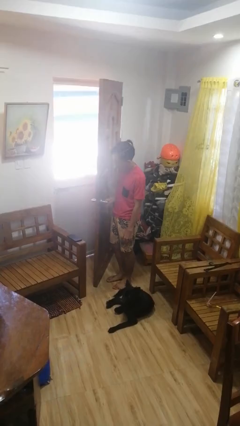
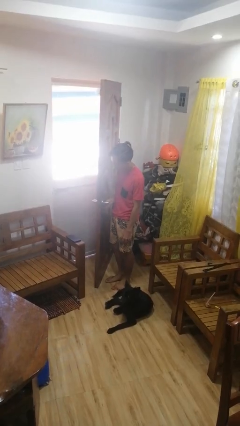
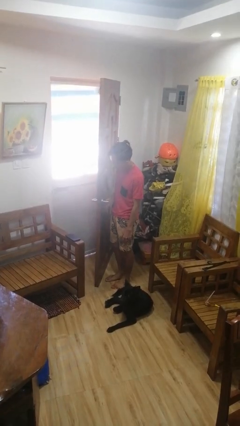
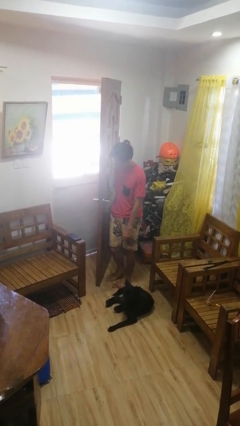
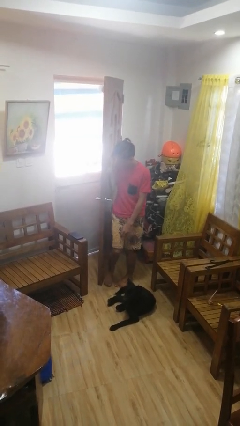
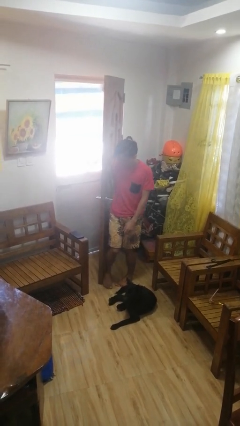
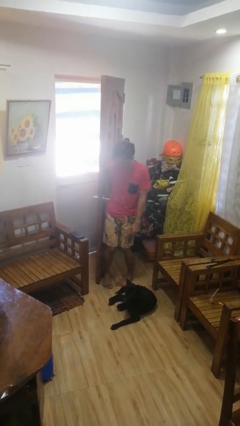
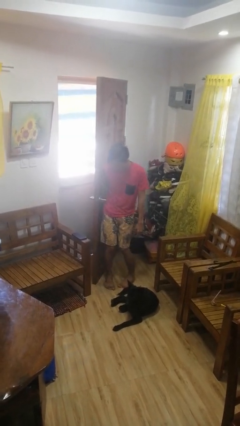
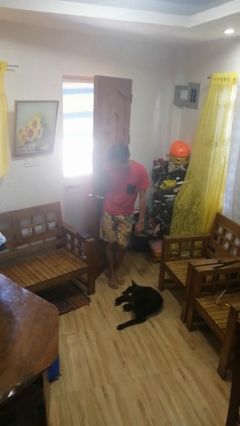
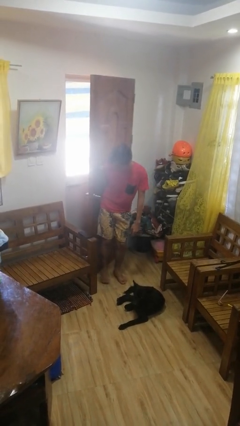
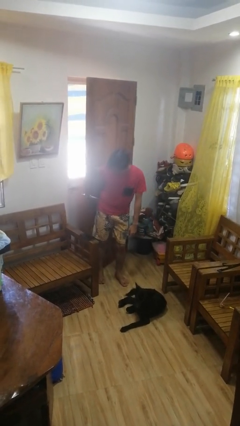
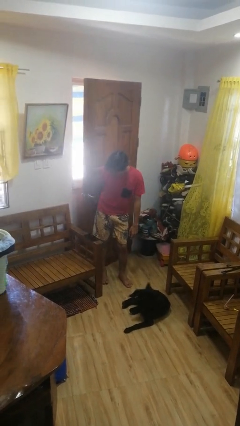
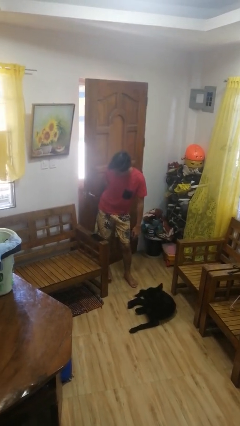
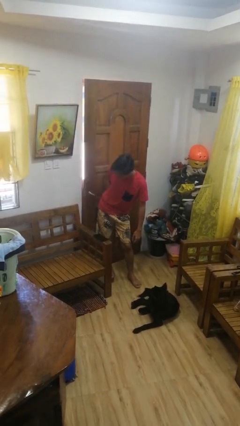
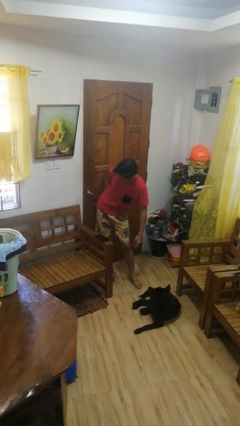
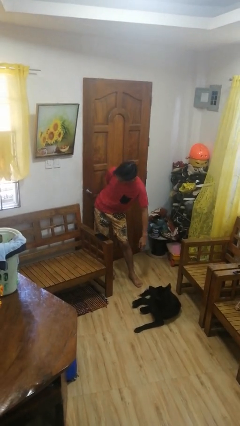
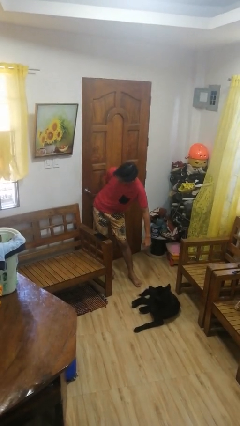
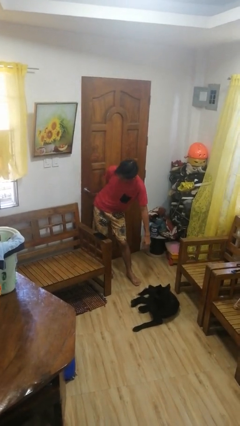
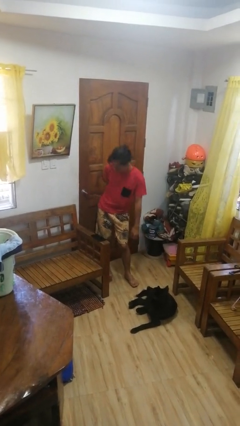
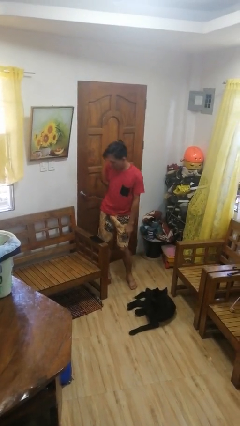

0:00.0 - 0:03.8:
person closes door with hip

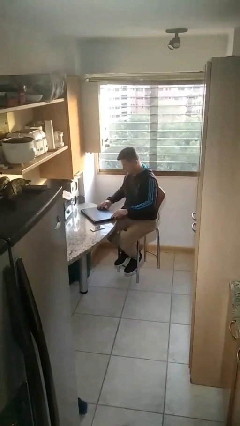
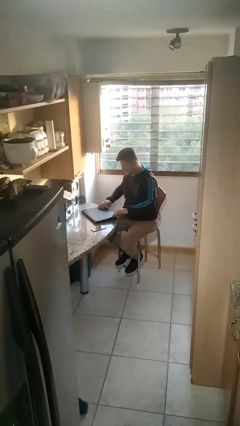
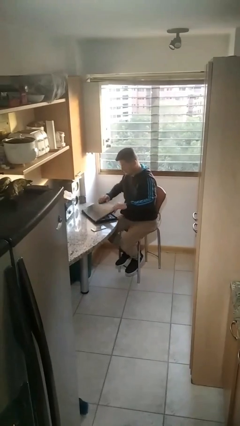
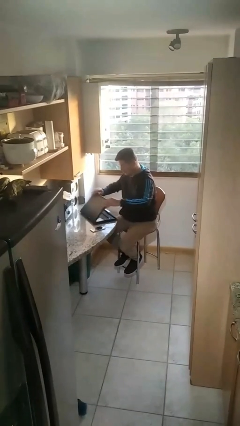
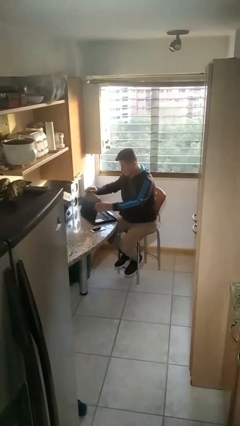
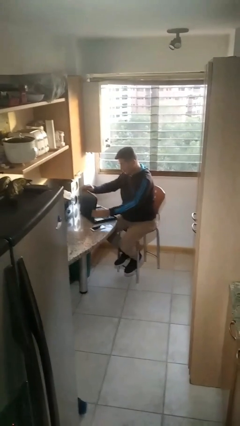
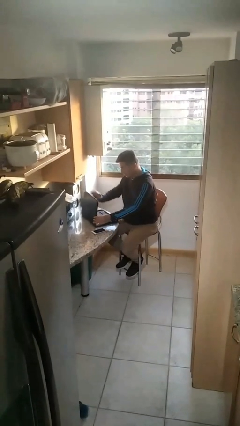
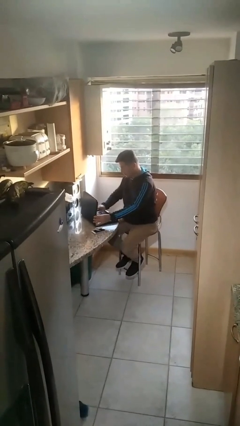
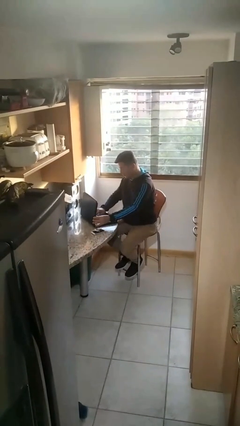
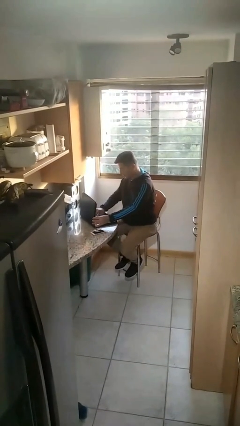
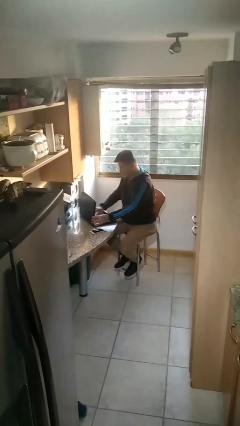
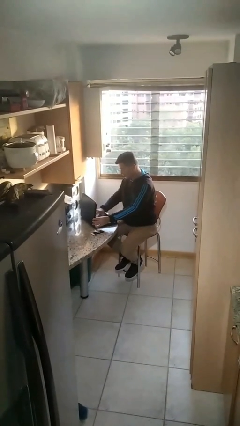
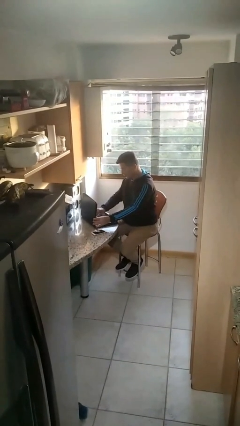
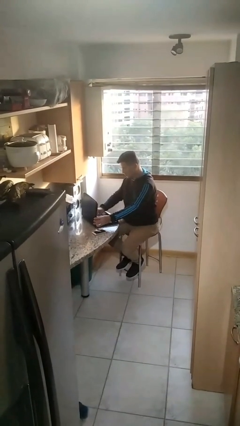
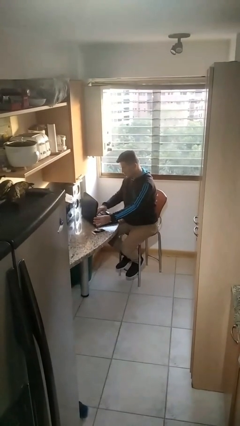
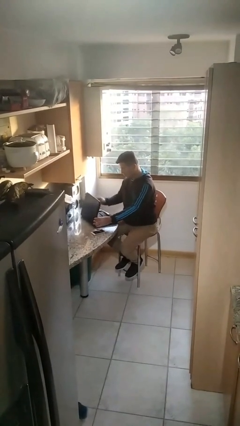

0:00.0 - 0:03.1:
person interacts with laptop

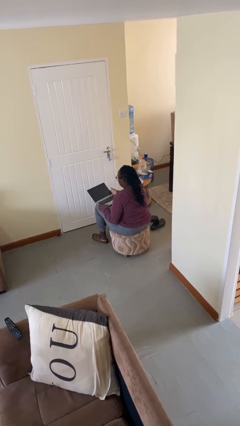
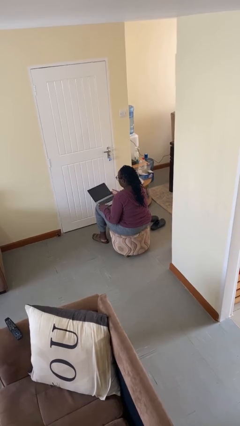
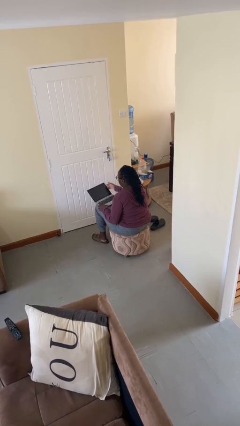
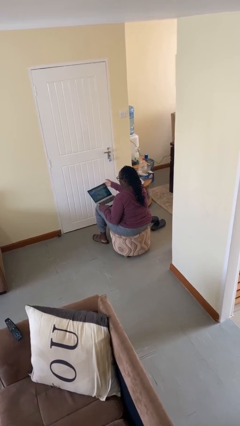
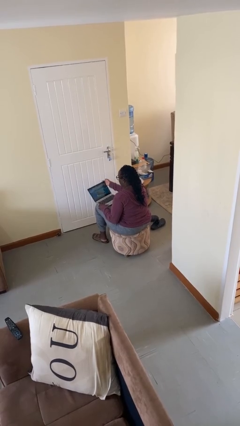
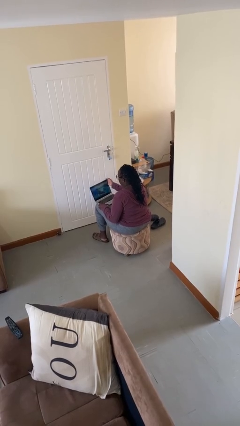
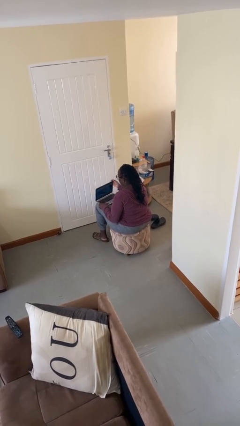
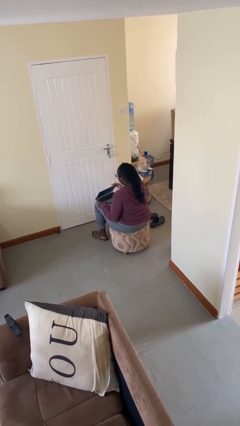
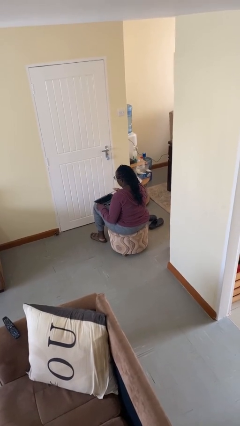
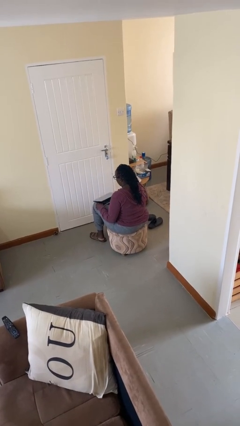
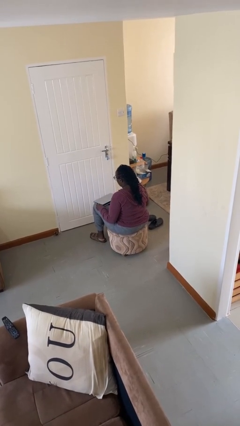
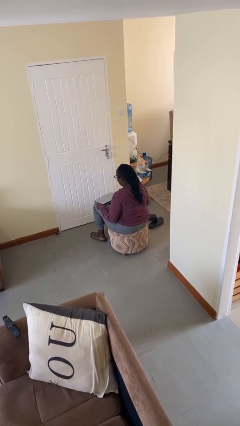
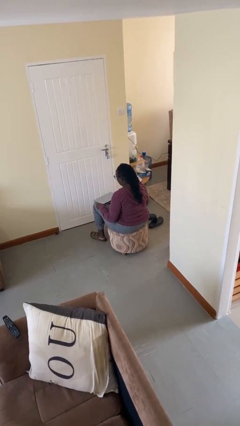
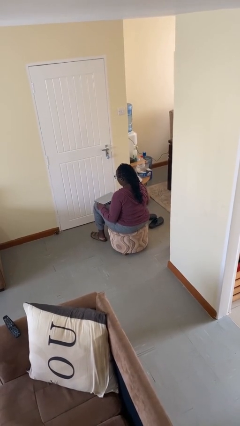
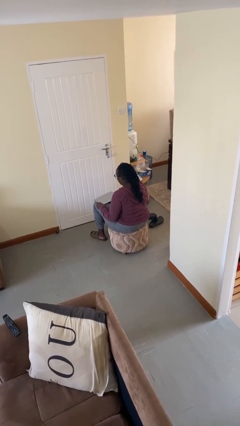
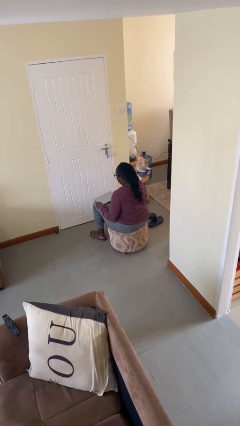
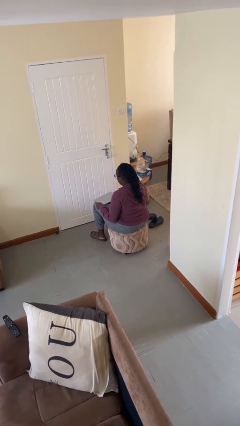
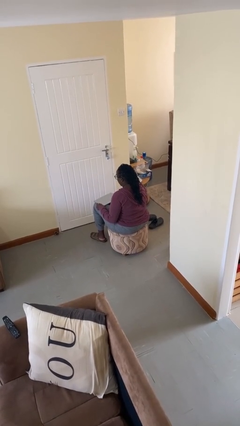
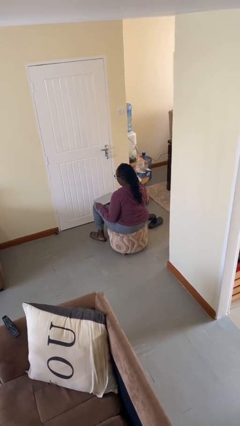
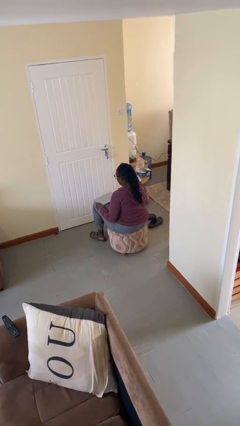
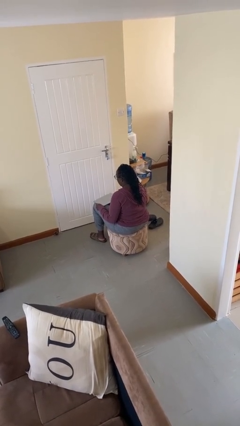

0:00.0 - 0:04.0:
person closes laptop

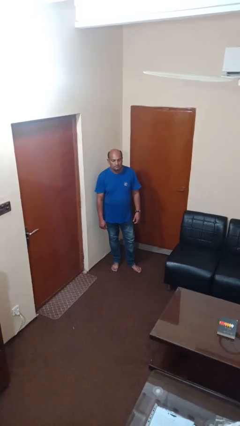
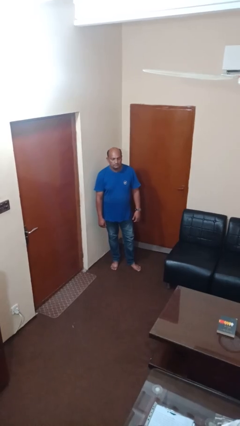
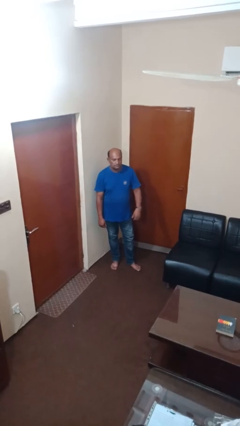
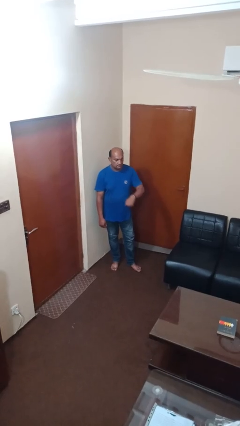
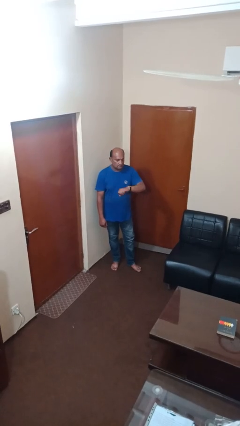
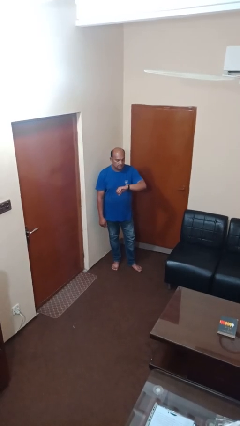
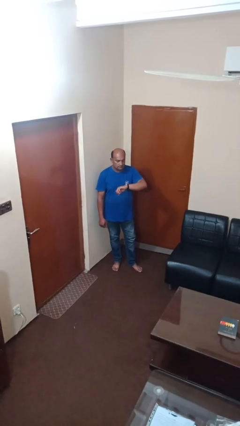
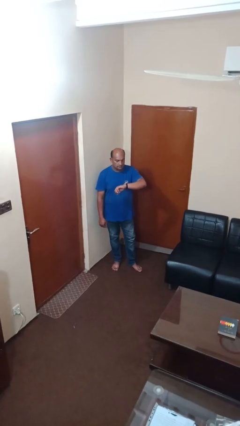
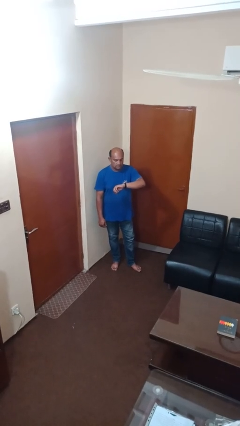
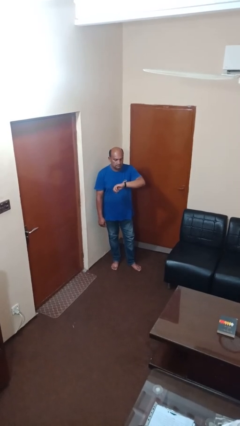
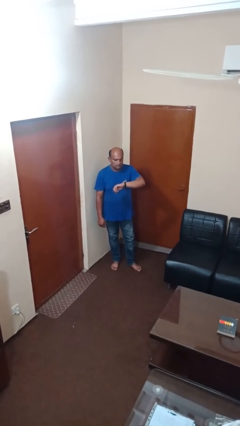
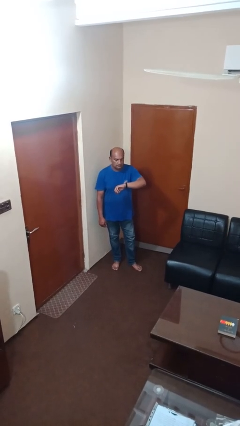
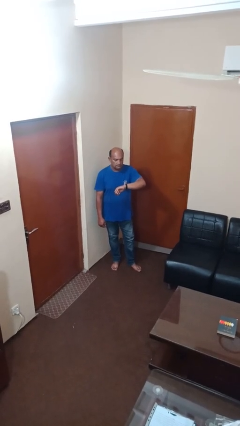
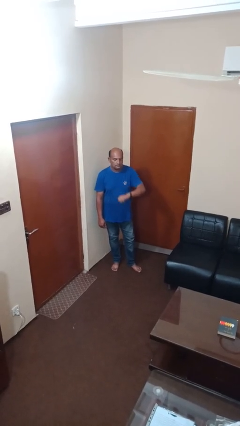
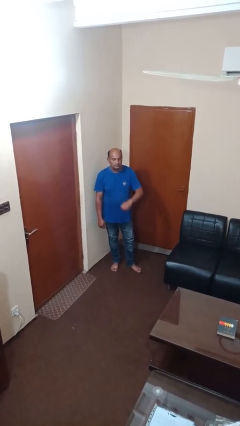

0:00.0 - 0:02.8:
person looks at wristwatch

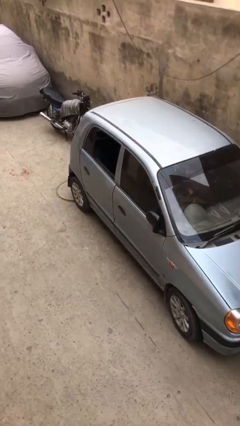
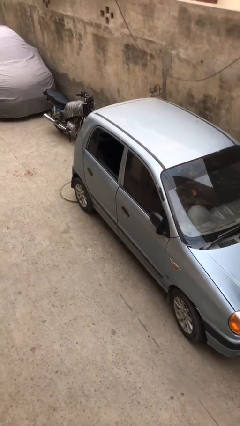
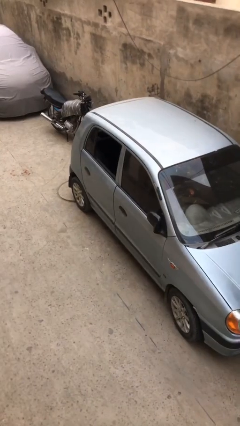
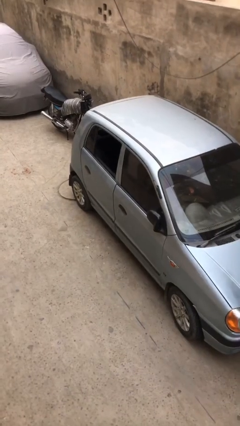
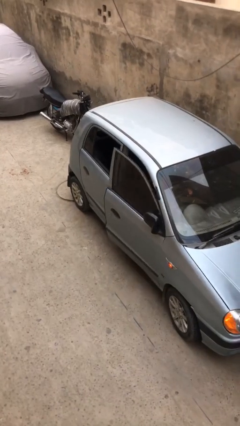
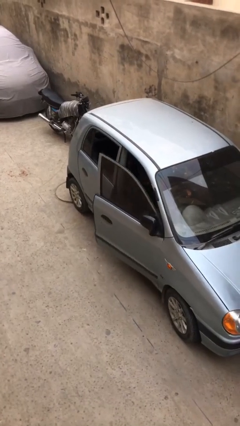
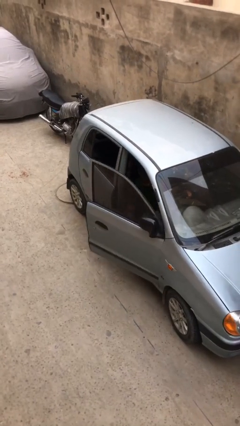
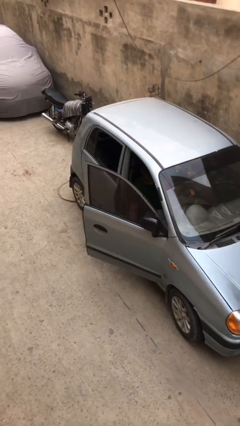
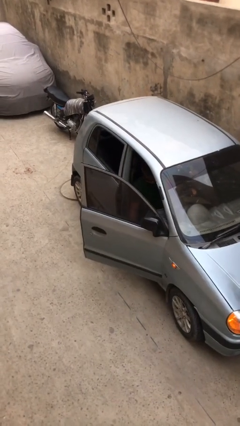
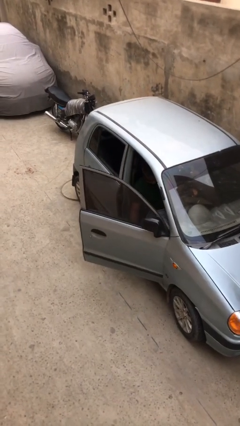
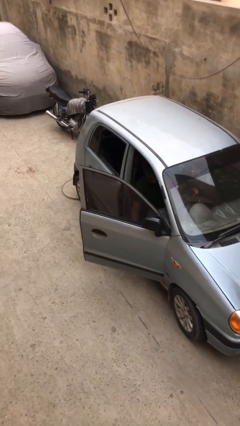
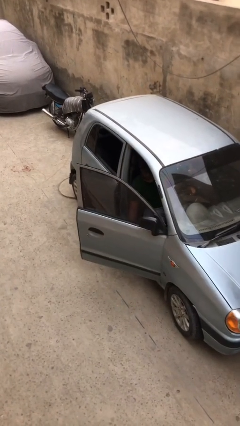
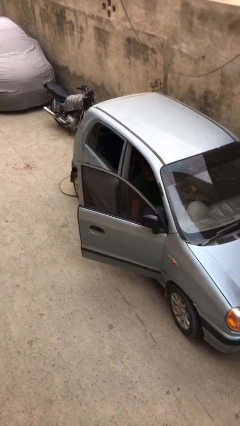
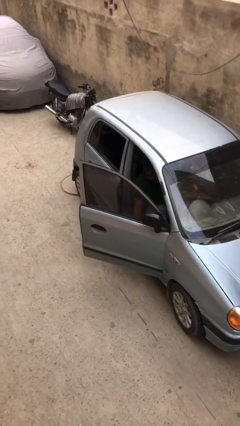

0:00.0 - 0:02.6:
person opens car door

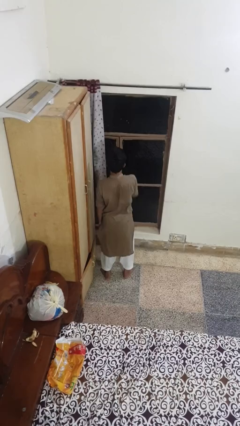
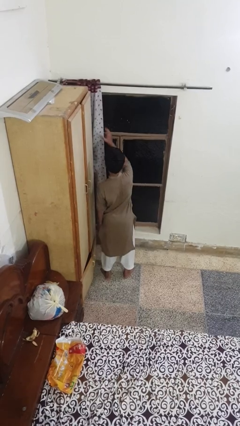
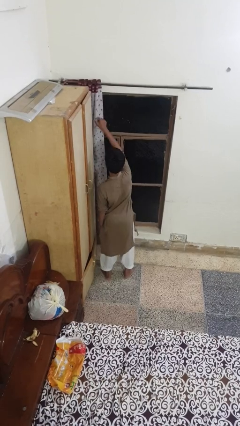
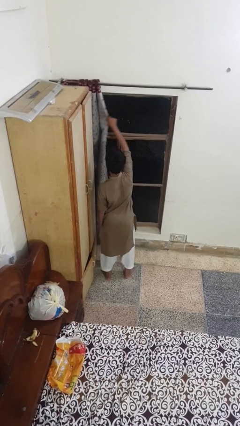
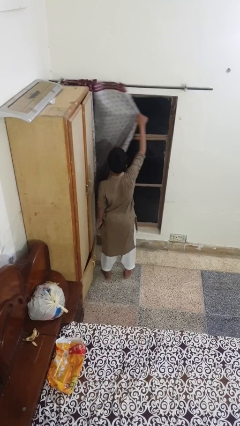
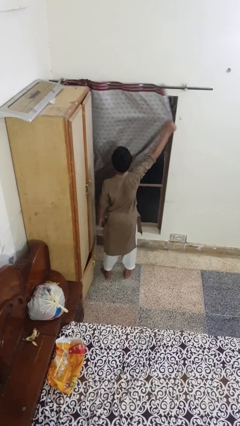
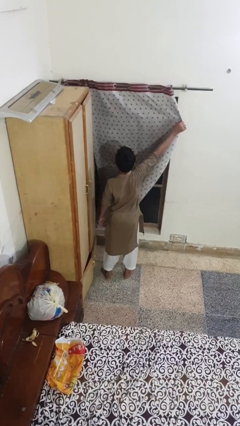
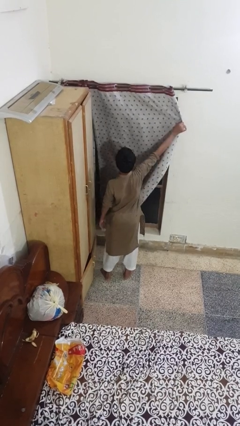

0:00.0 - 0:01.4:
person closes curtains

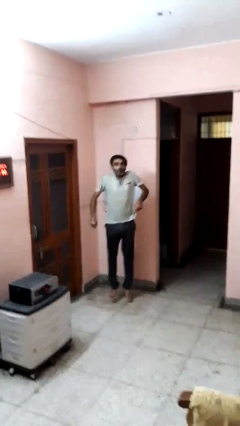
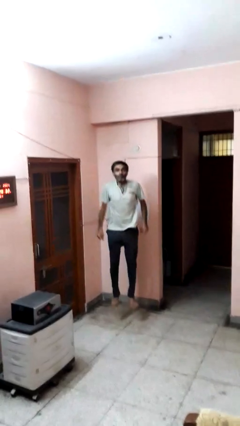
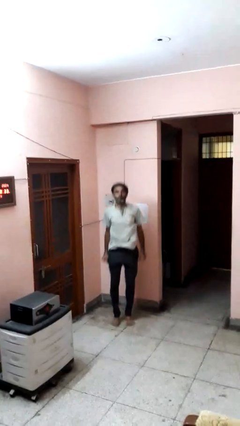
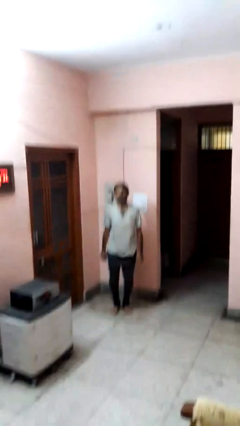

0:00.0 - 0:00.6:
person jumps
